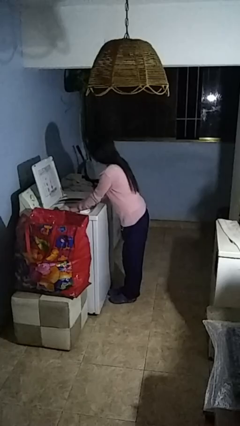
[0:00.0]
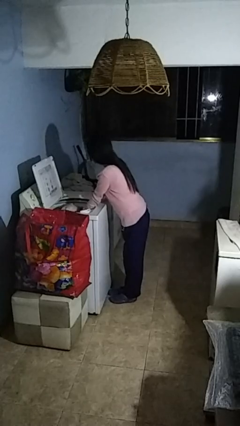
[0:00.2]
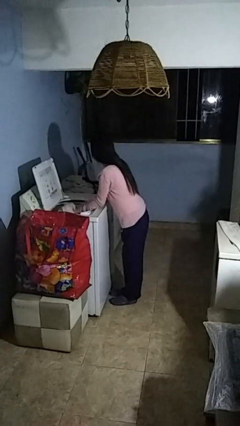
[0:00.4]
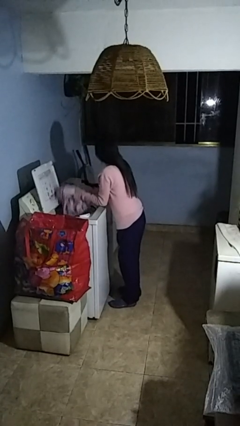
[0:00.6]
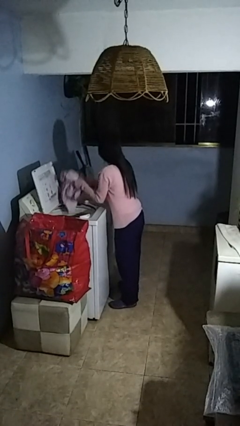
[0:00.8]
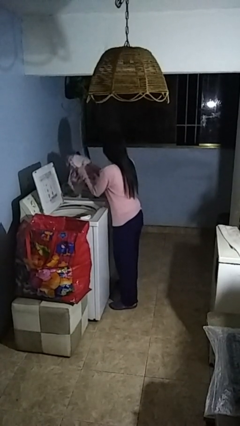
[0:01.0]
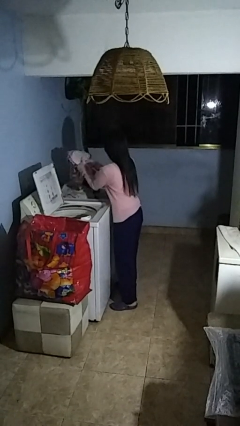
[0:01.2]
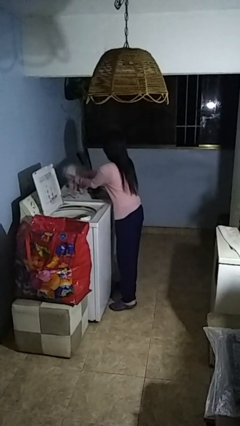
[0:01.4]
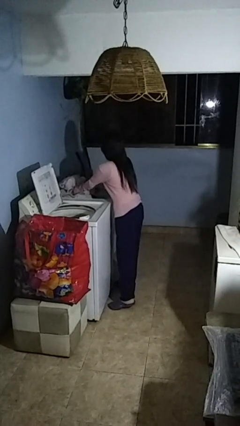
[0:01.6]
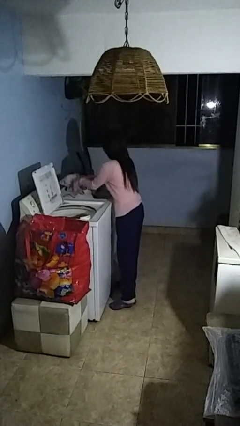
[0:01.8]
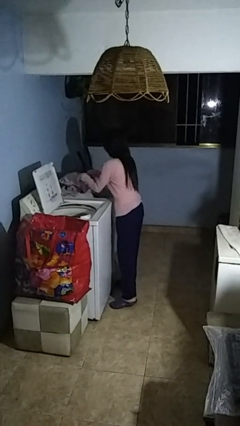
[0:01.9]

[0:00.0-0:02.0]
person loads clotheswasher

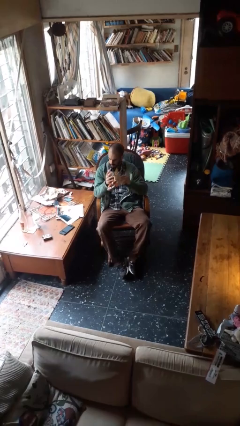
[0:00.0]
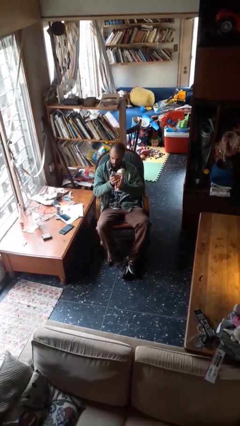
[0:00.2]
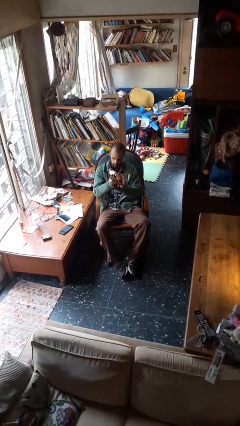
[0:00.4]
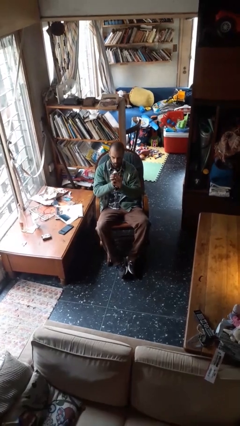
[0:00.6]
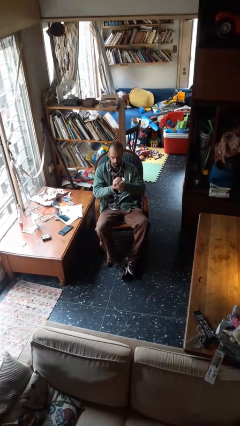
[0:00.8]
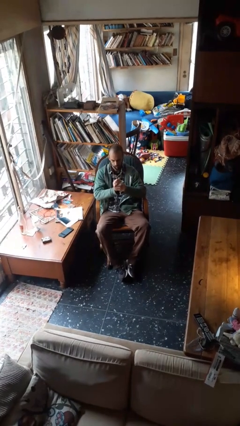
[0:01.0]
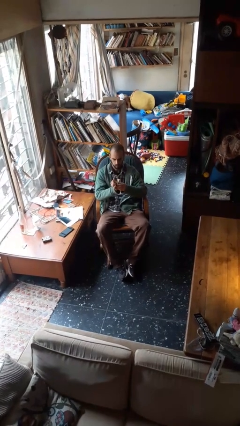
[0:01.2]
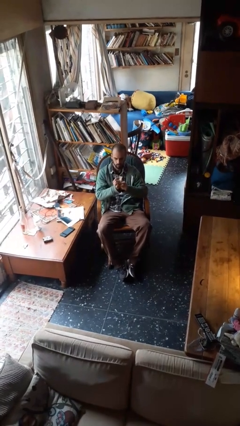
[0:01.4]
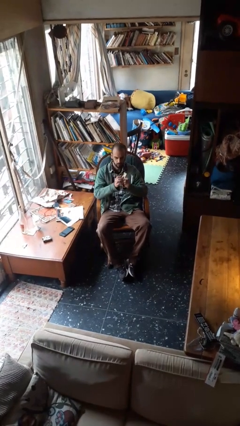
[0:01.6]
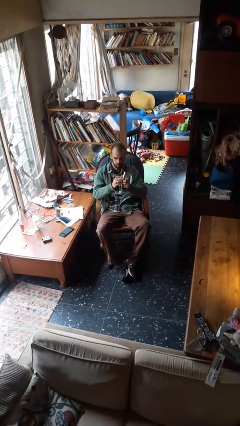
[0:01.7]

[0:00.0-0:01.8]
person crumples paper

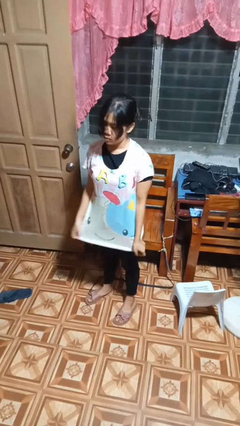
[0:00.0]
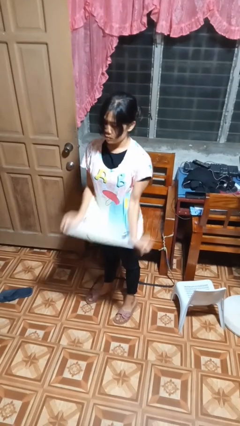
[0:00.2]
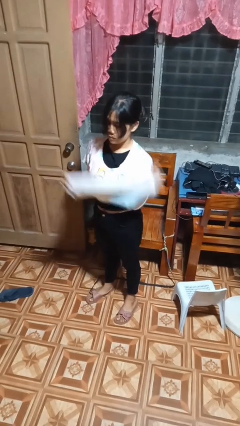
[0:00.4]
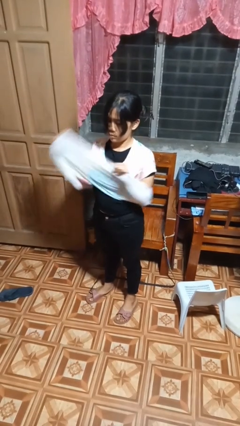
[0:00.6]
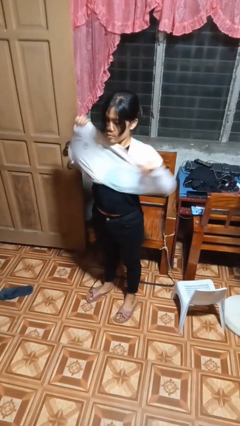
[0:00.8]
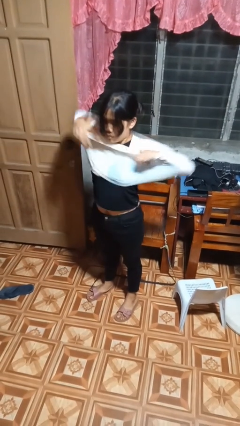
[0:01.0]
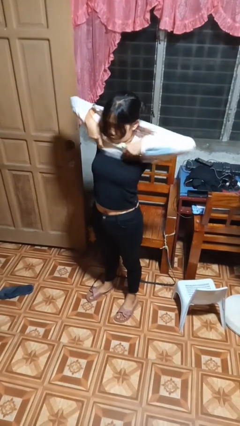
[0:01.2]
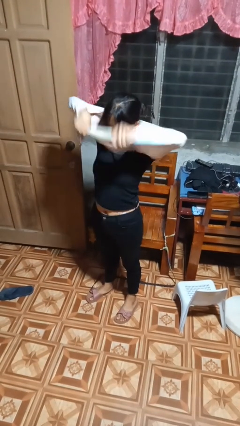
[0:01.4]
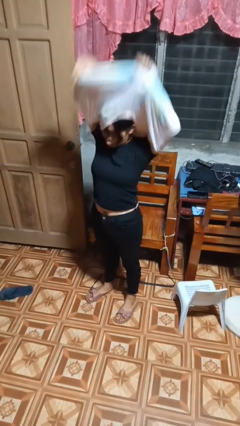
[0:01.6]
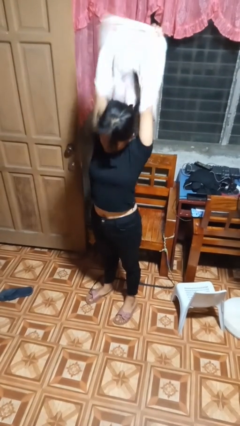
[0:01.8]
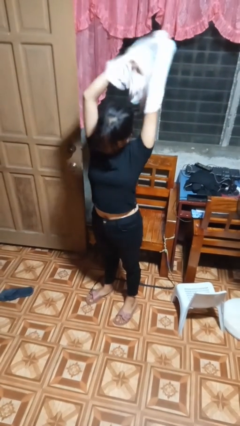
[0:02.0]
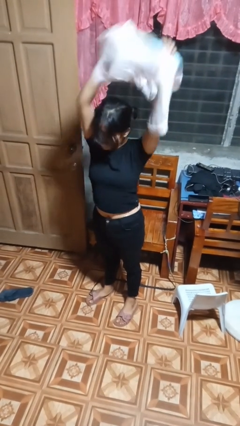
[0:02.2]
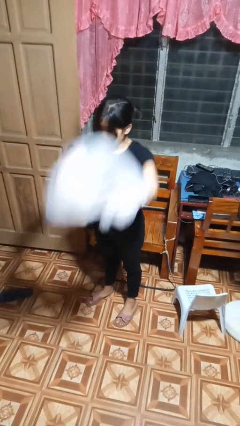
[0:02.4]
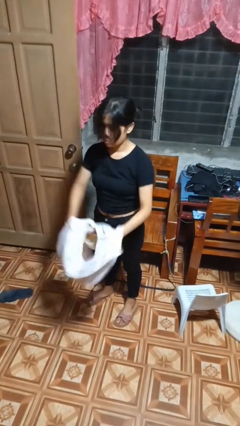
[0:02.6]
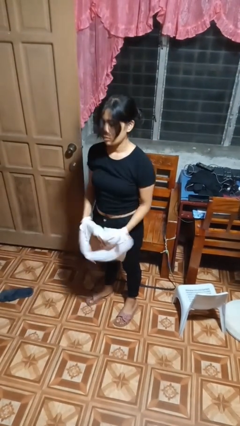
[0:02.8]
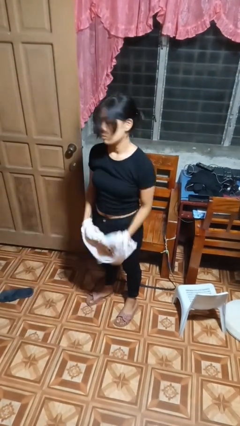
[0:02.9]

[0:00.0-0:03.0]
person takes off shirt

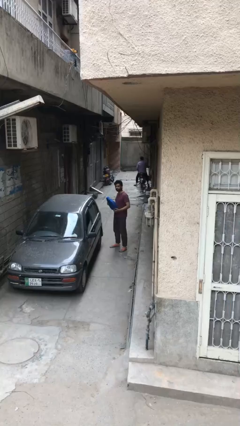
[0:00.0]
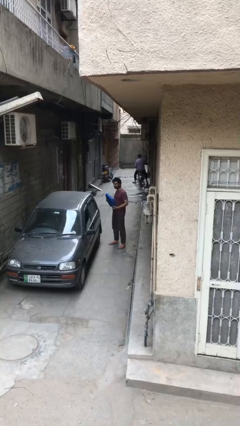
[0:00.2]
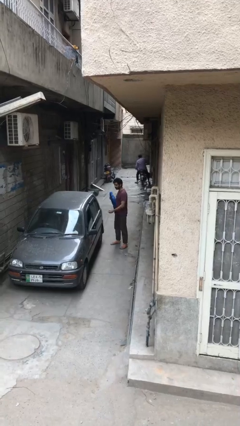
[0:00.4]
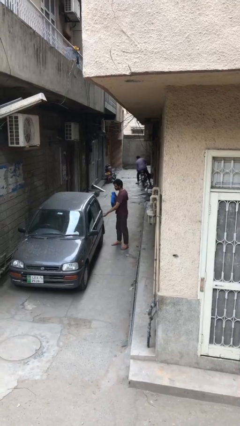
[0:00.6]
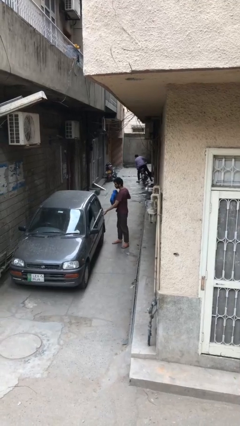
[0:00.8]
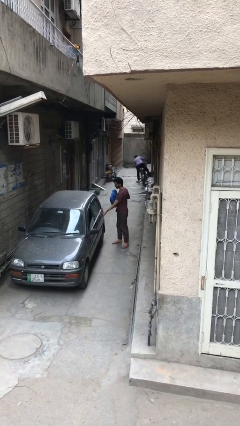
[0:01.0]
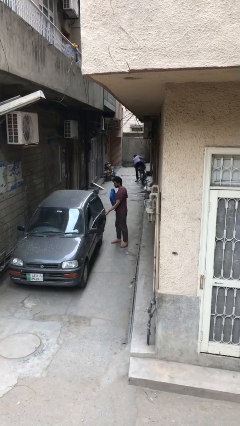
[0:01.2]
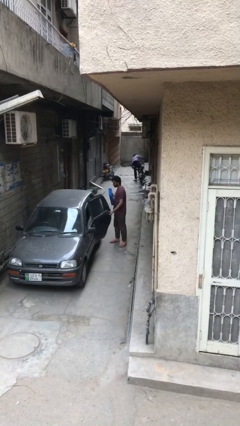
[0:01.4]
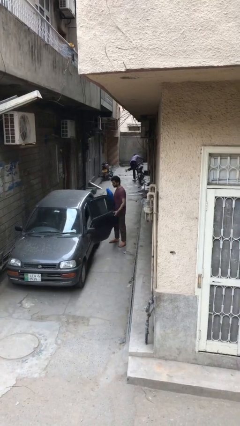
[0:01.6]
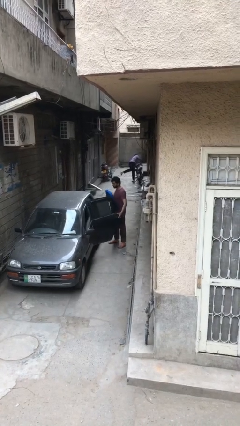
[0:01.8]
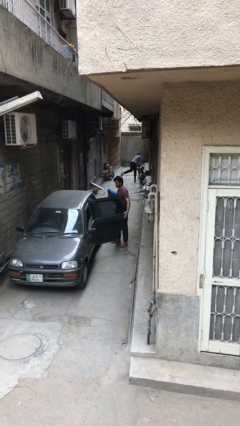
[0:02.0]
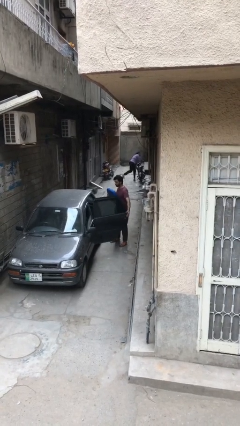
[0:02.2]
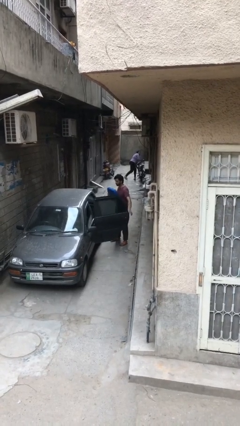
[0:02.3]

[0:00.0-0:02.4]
person opens car door

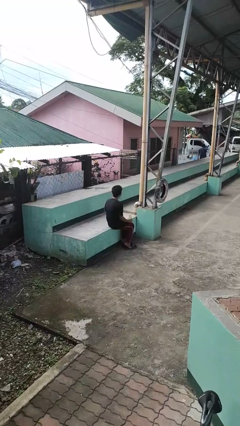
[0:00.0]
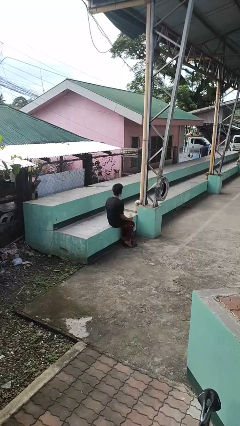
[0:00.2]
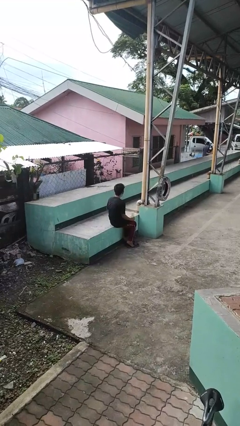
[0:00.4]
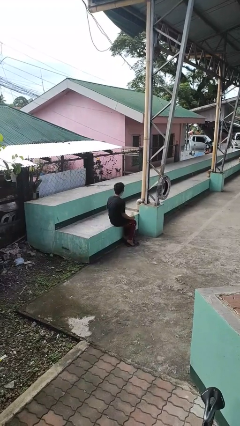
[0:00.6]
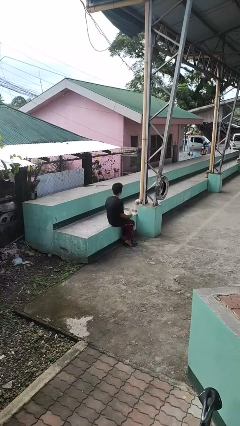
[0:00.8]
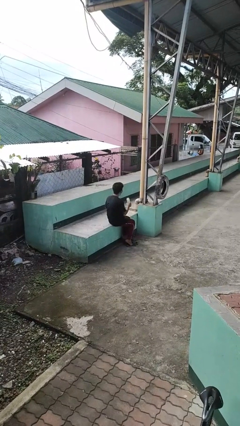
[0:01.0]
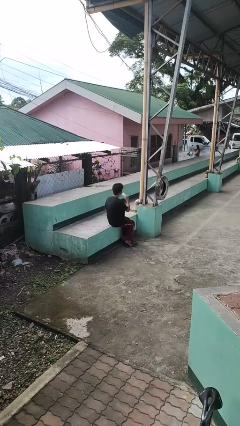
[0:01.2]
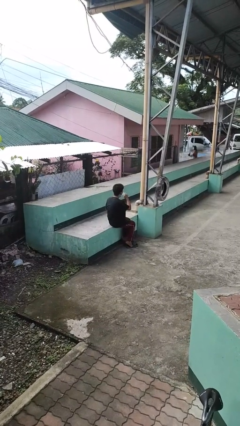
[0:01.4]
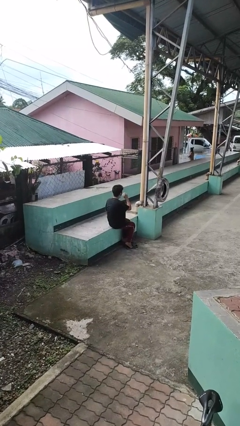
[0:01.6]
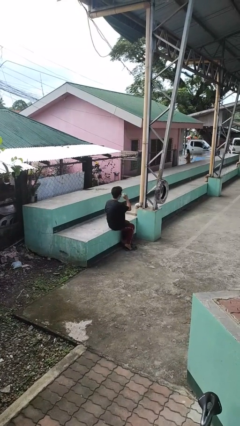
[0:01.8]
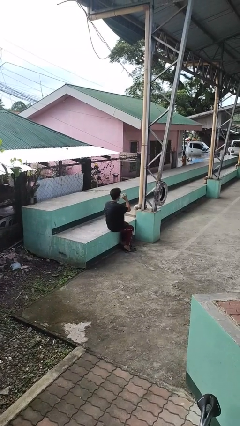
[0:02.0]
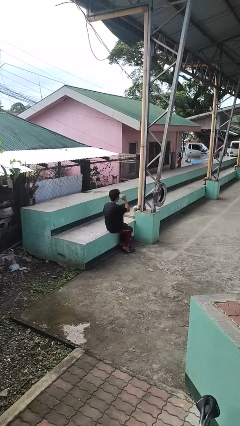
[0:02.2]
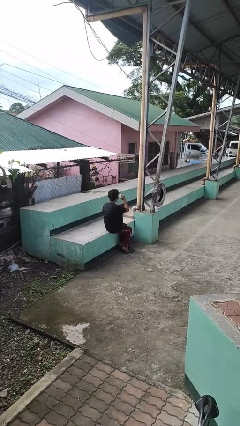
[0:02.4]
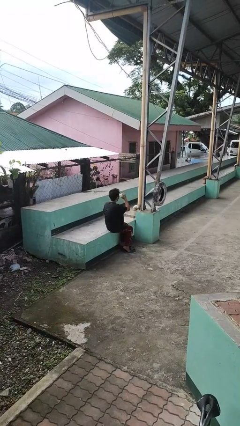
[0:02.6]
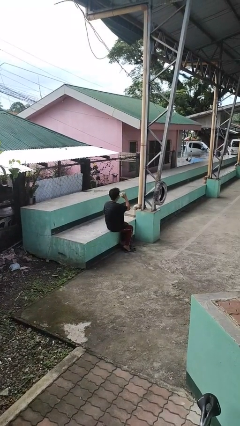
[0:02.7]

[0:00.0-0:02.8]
person drinks from bottle

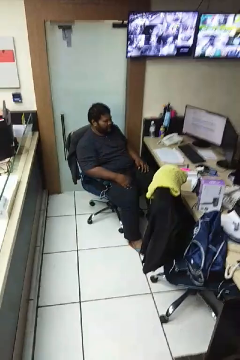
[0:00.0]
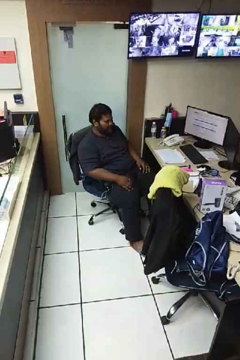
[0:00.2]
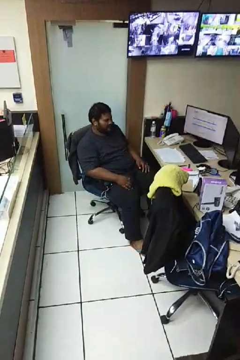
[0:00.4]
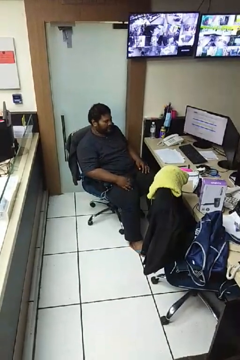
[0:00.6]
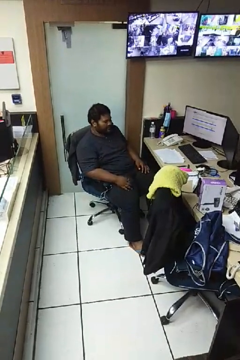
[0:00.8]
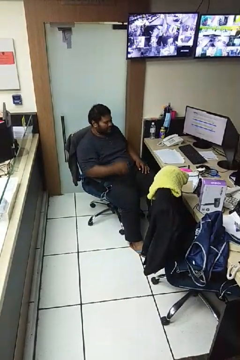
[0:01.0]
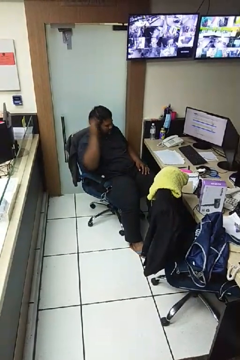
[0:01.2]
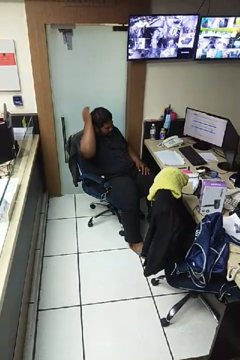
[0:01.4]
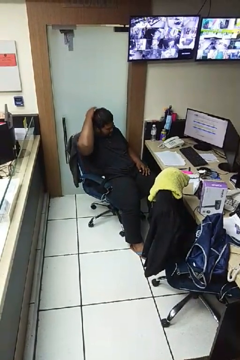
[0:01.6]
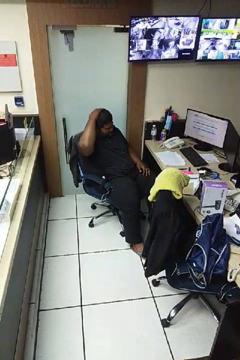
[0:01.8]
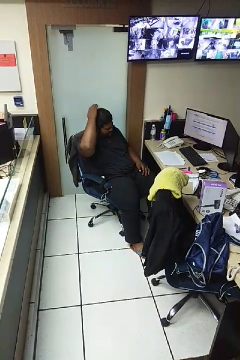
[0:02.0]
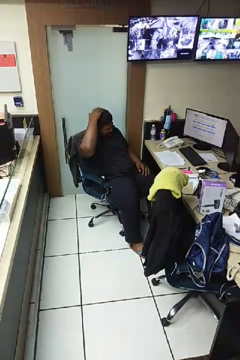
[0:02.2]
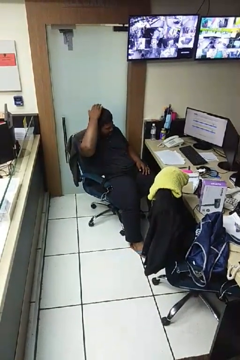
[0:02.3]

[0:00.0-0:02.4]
person pats head

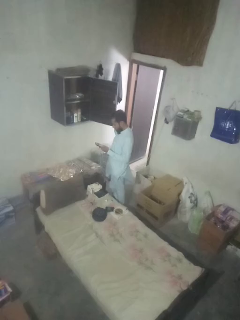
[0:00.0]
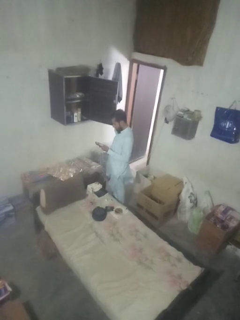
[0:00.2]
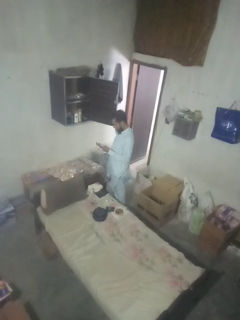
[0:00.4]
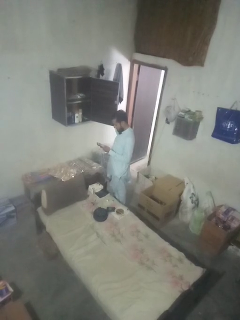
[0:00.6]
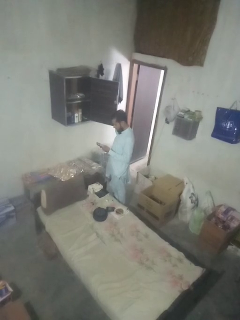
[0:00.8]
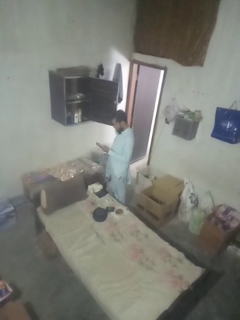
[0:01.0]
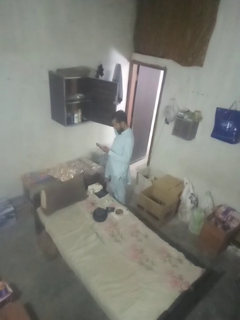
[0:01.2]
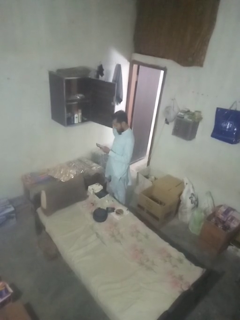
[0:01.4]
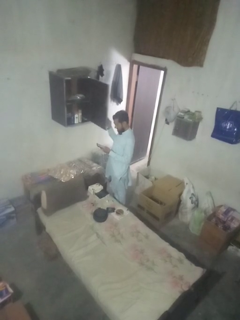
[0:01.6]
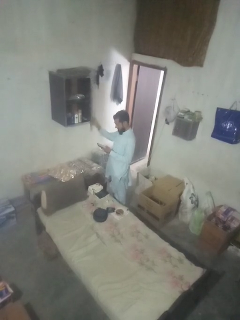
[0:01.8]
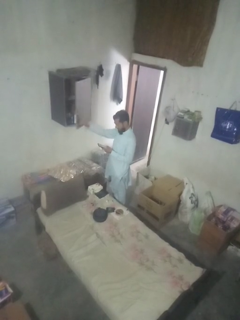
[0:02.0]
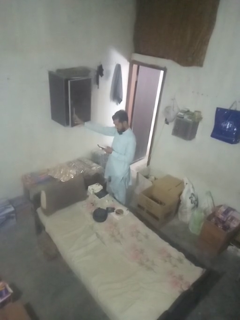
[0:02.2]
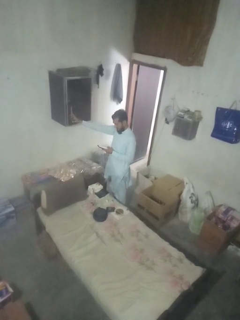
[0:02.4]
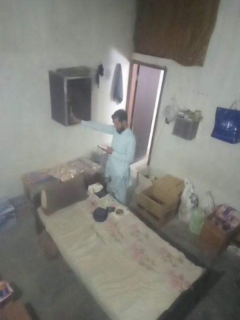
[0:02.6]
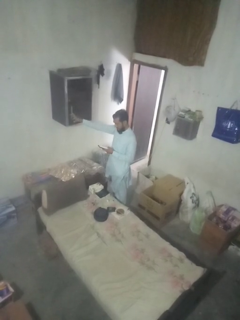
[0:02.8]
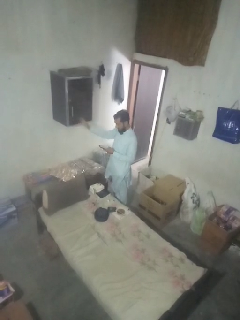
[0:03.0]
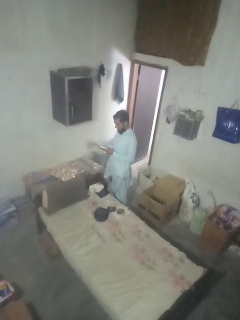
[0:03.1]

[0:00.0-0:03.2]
person closes dresser drawer

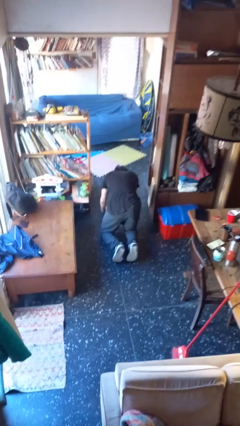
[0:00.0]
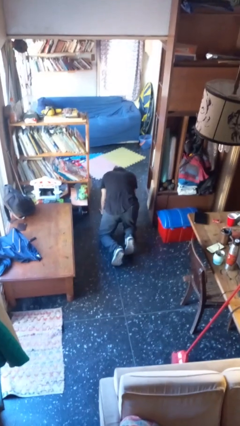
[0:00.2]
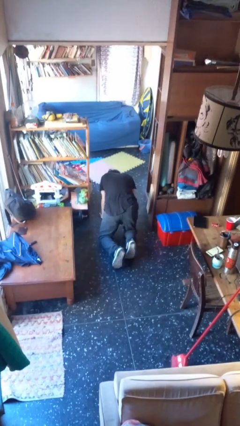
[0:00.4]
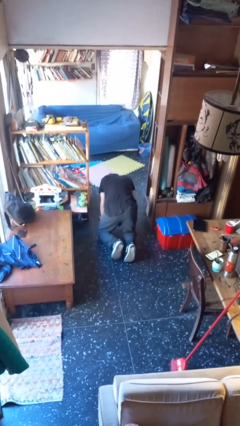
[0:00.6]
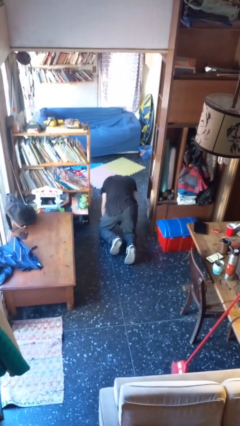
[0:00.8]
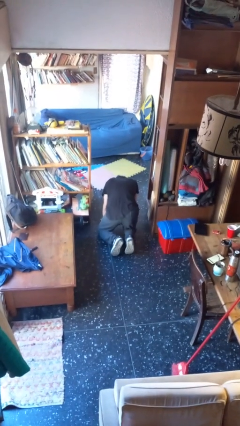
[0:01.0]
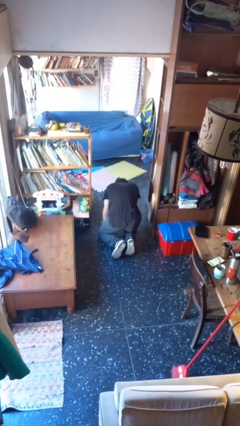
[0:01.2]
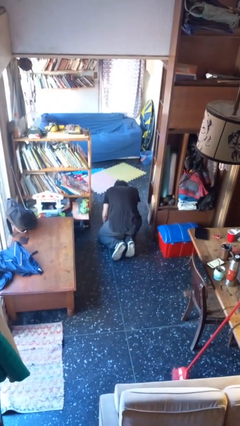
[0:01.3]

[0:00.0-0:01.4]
person crawls
